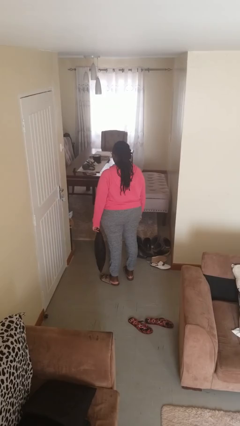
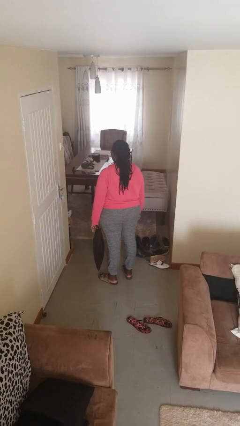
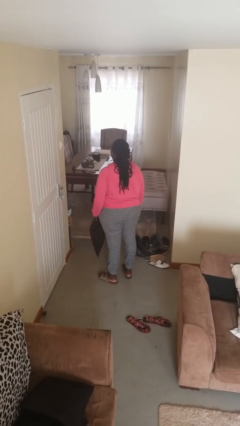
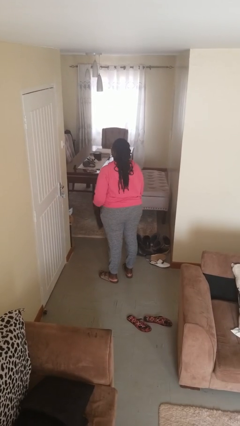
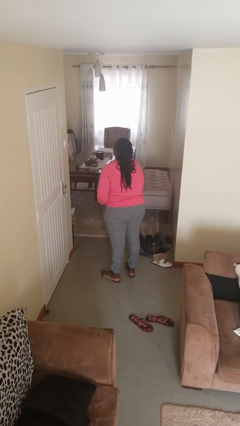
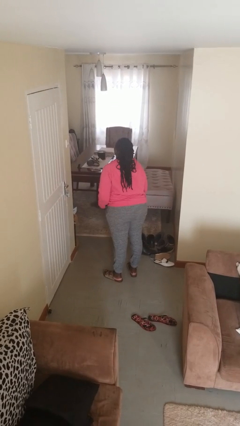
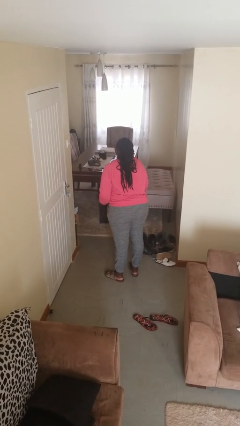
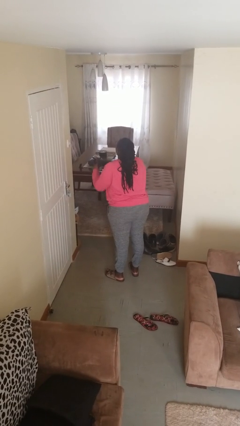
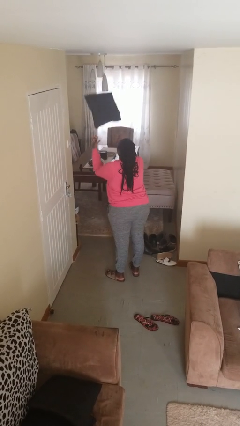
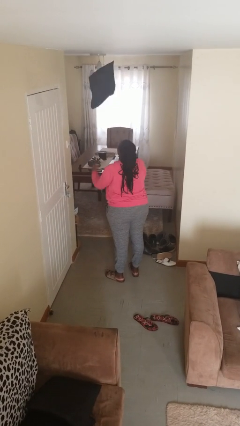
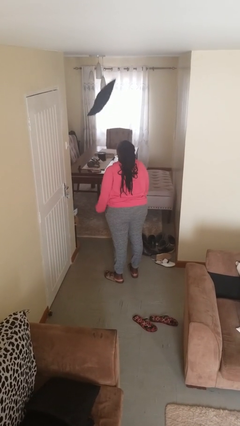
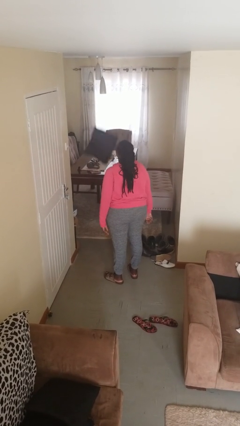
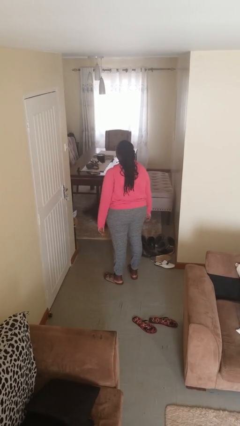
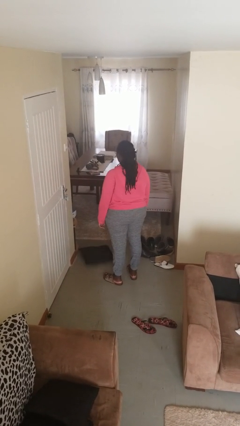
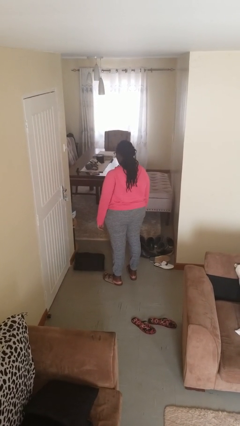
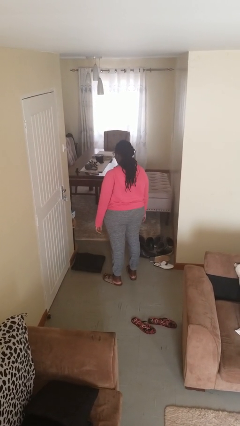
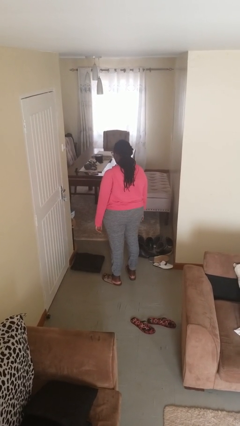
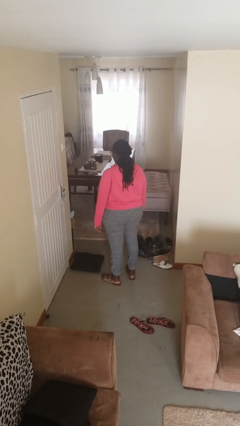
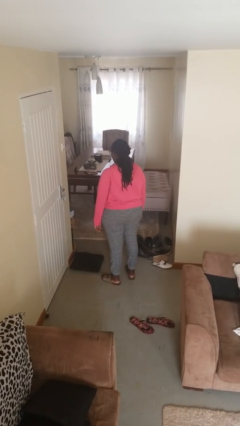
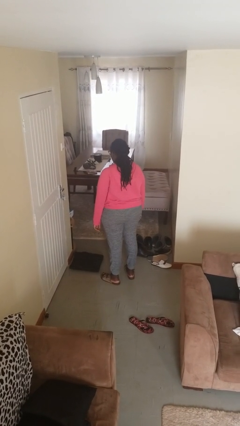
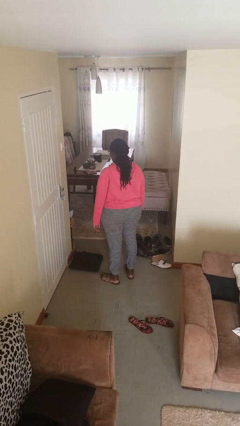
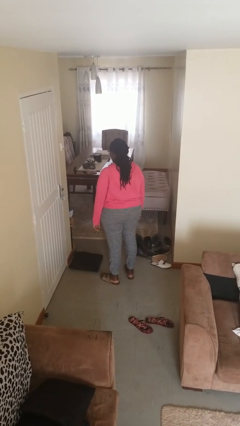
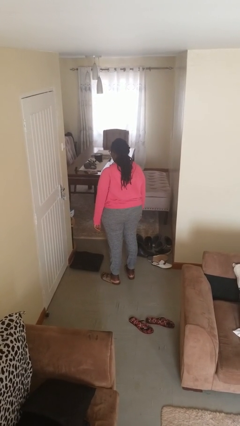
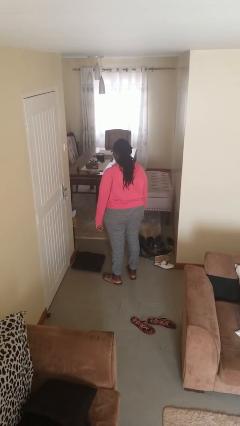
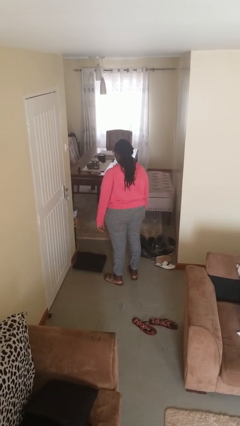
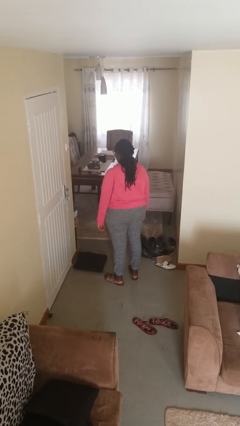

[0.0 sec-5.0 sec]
person throws object into air

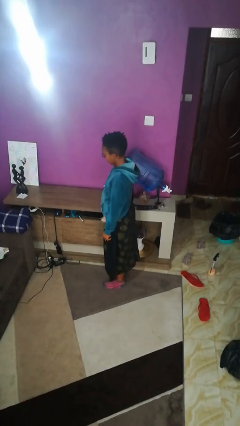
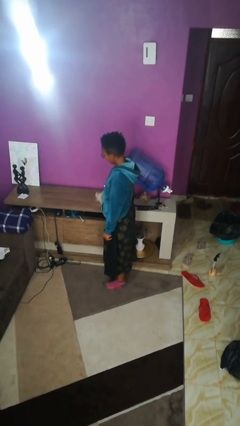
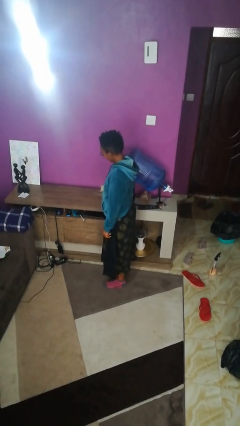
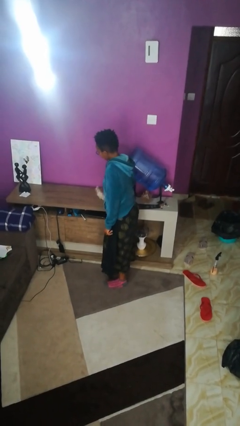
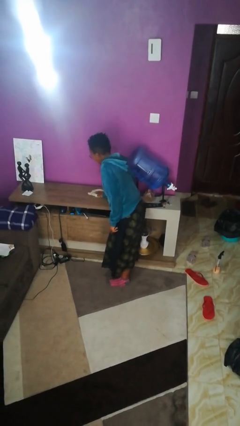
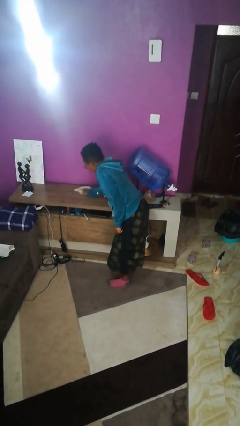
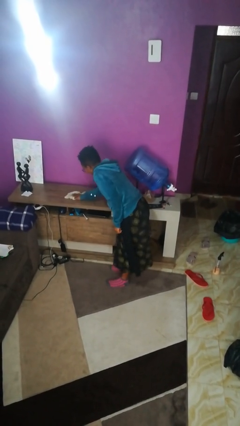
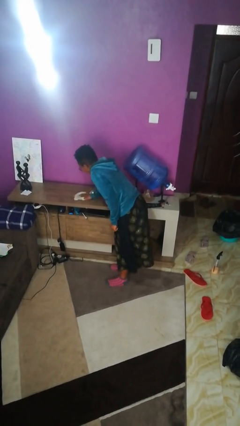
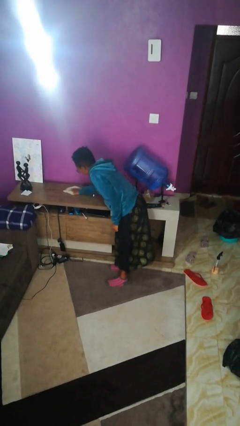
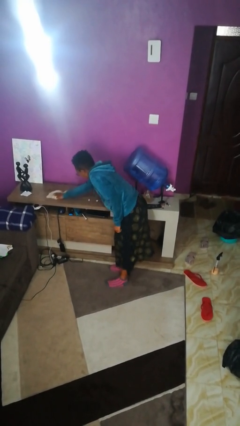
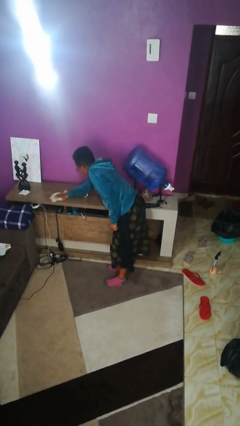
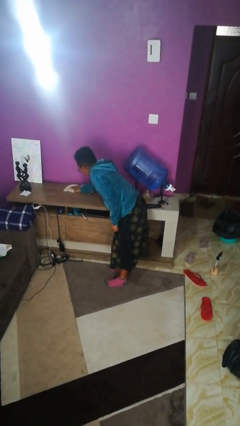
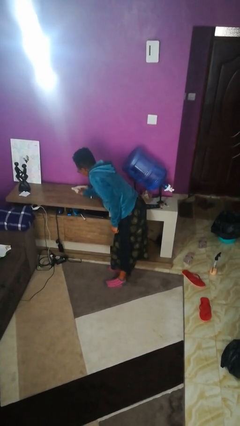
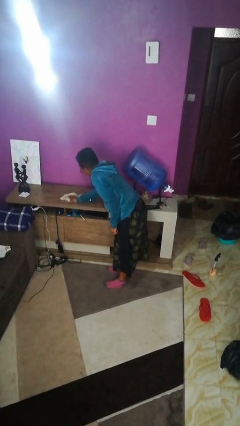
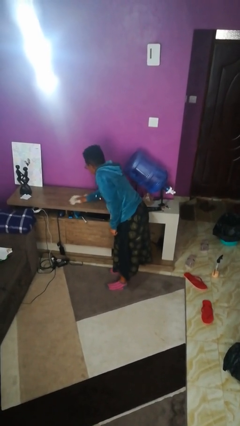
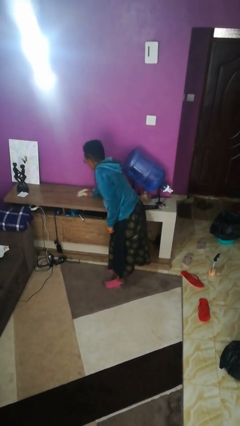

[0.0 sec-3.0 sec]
person cleans table with rag

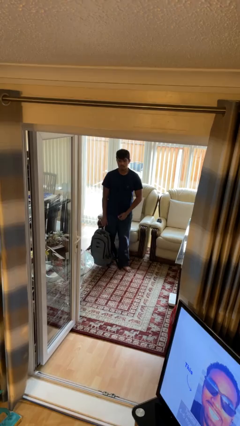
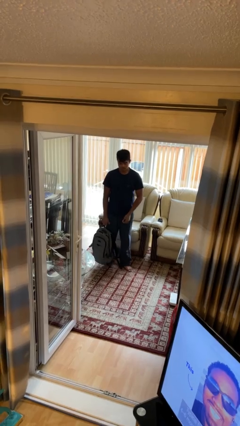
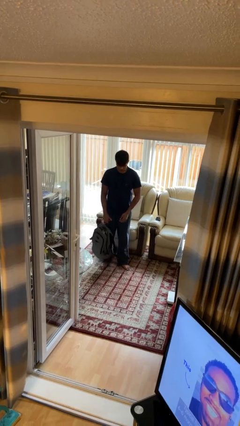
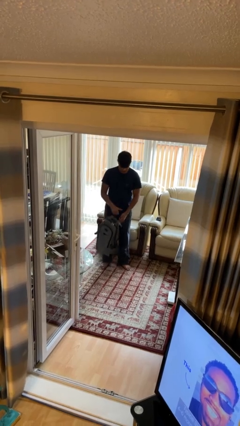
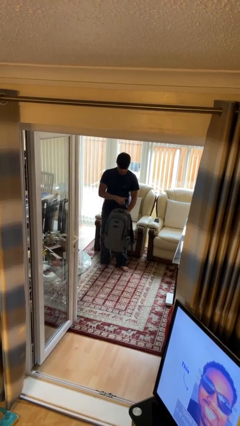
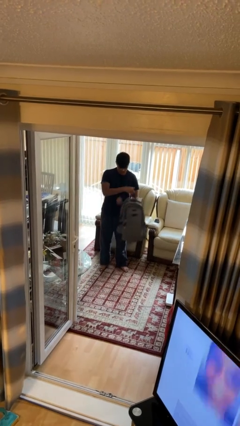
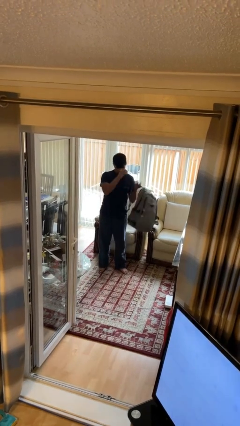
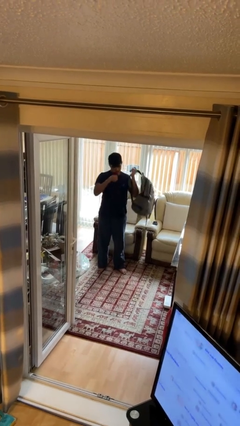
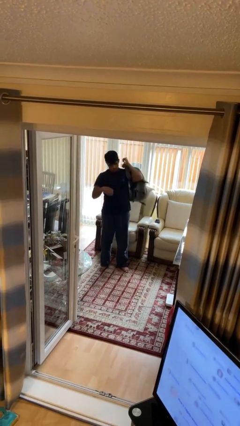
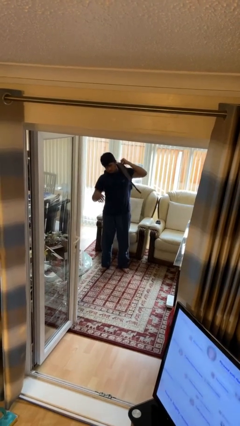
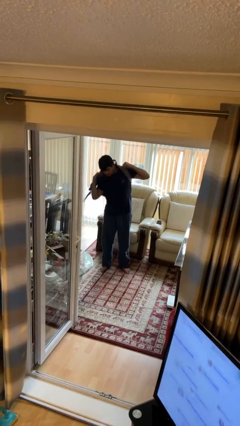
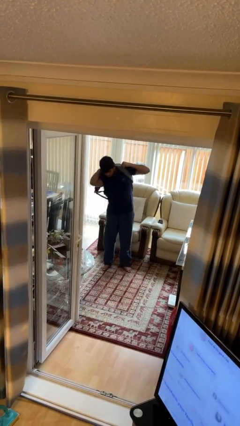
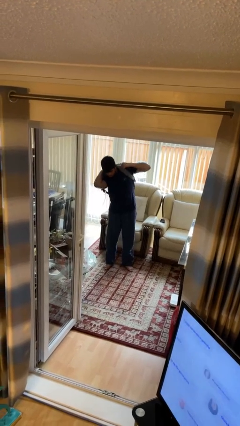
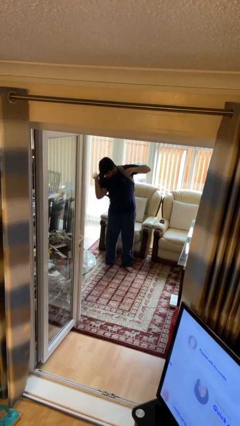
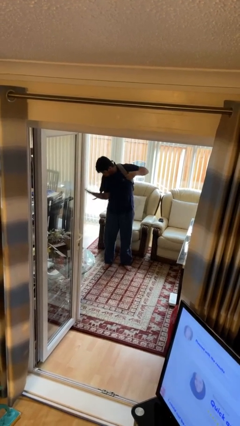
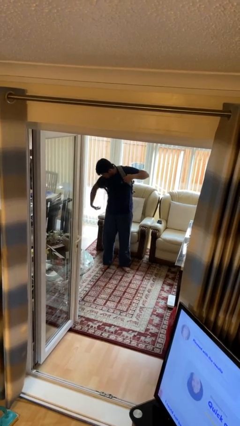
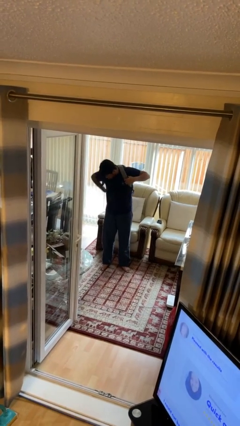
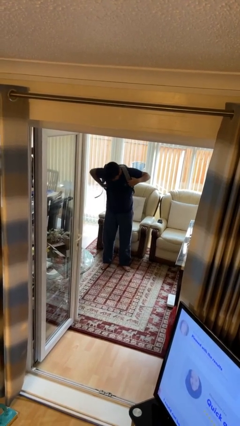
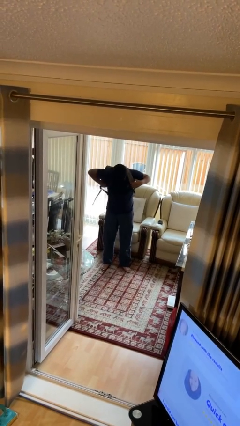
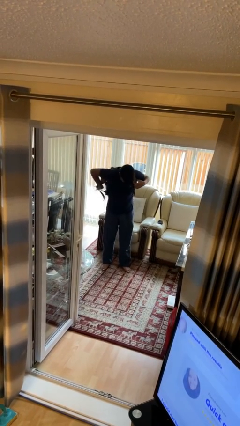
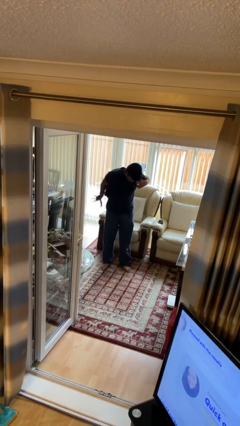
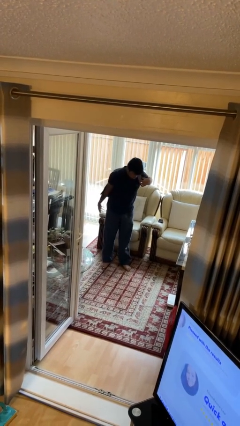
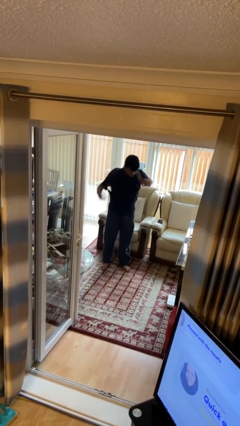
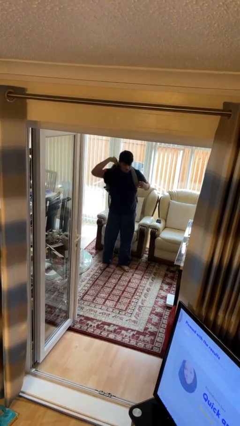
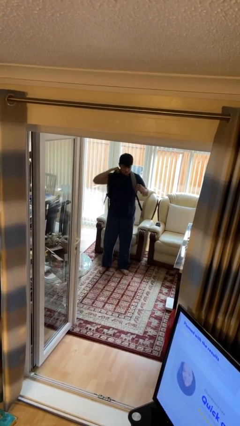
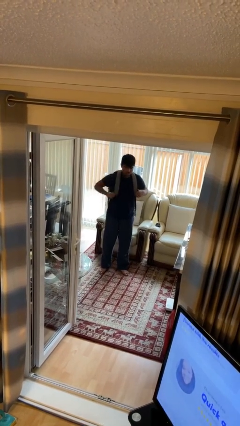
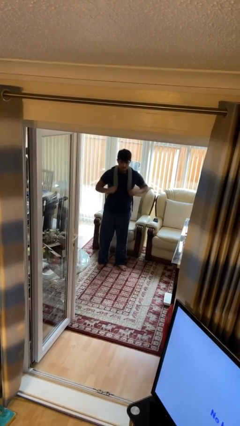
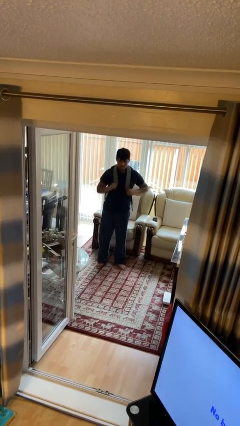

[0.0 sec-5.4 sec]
person puts on backpack

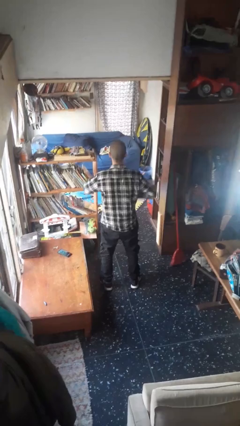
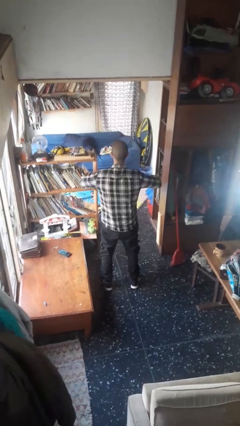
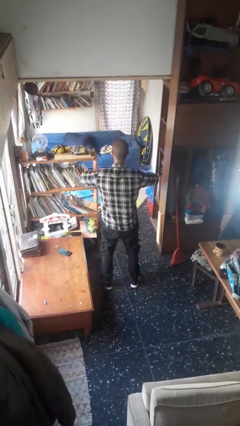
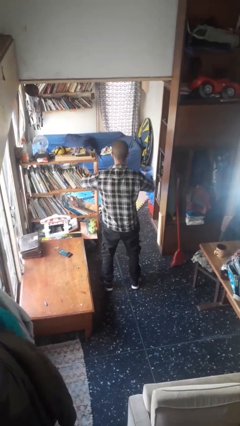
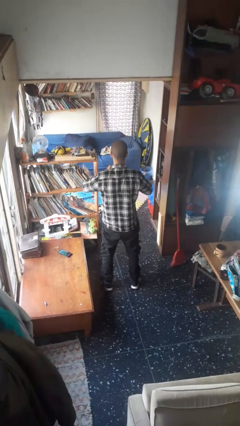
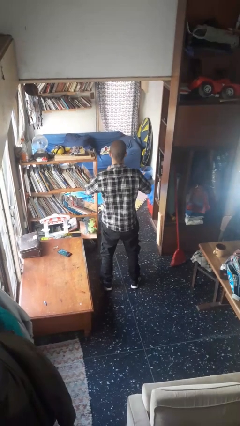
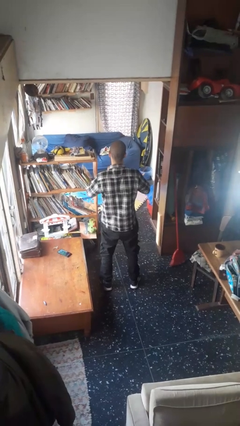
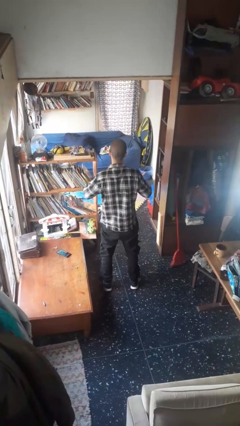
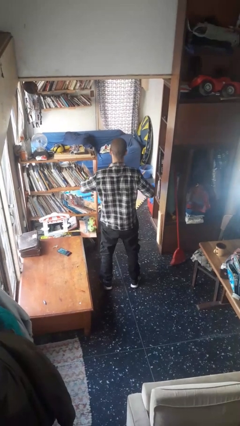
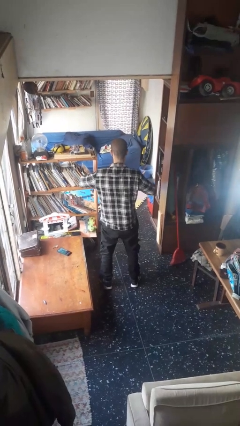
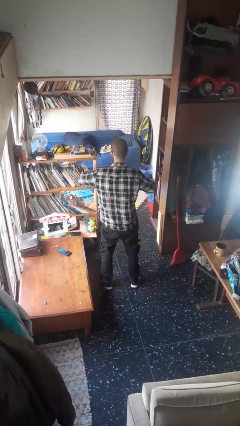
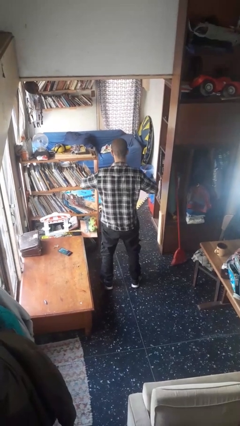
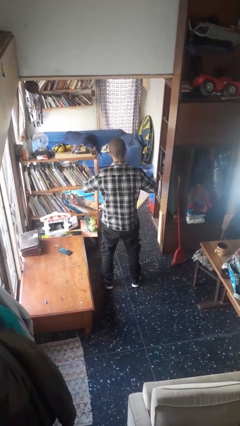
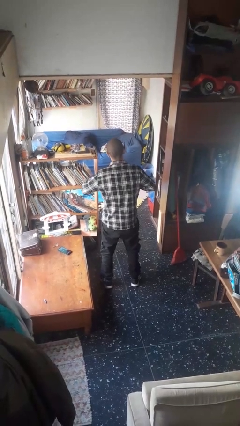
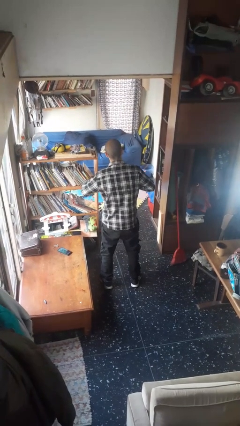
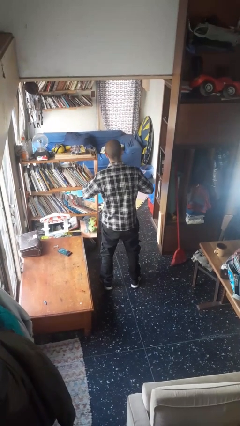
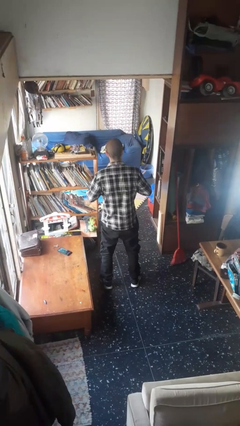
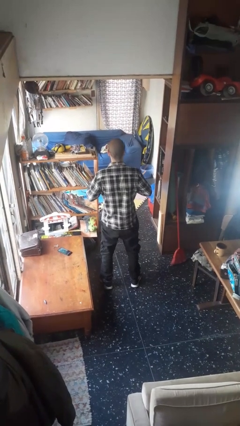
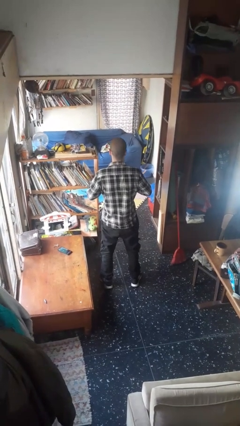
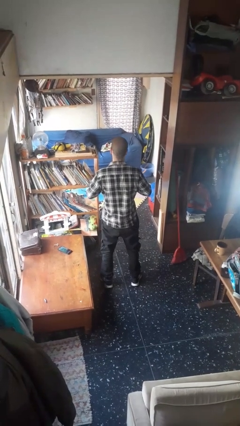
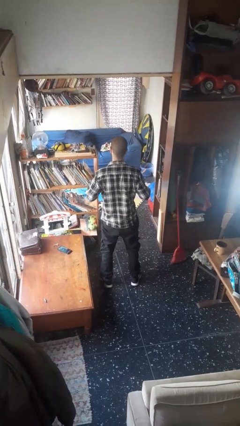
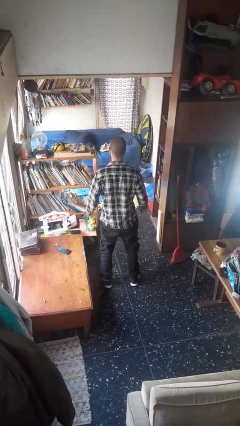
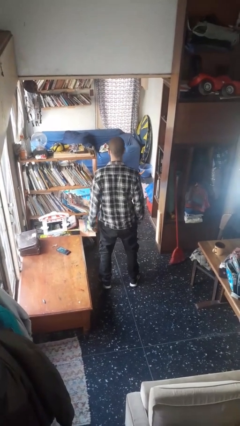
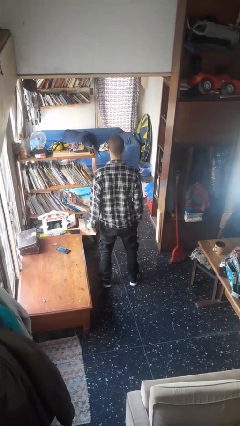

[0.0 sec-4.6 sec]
person unbuttons shirt
